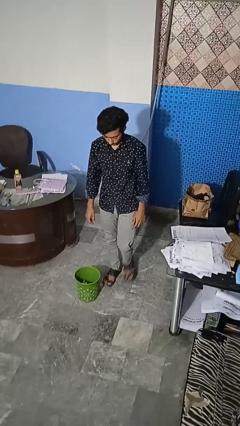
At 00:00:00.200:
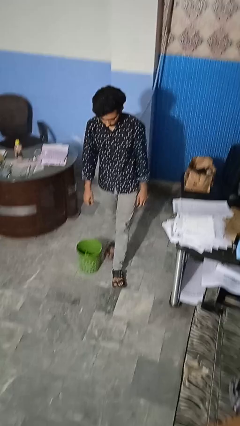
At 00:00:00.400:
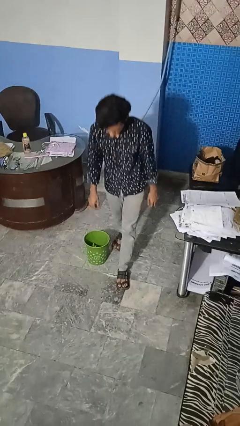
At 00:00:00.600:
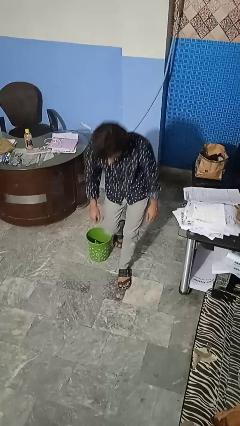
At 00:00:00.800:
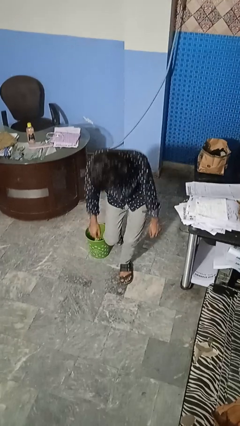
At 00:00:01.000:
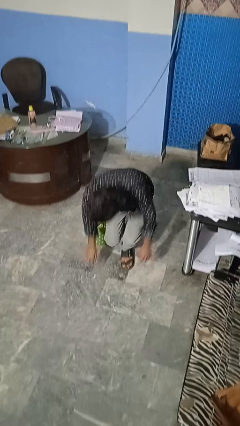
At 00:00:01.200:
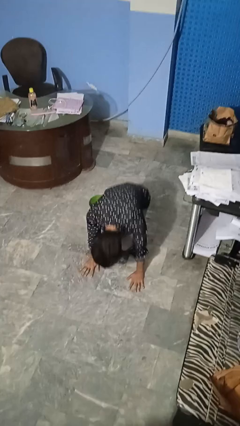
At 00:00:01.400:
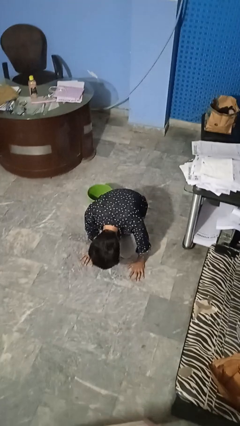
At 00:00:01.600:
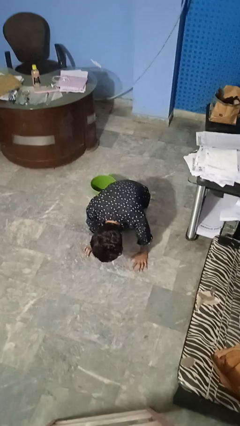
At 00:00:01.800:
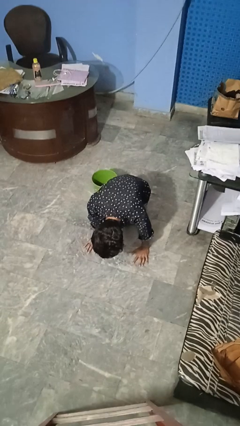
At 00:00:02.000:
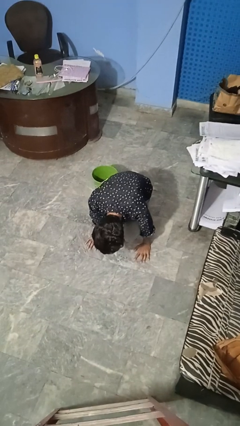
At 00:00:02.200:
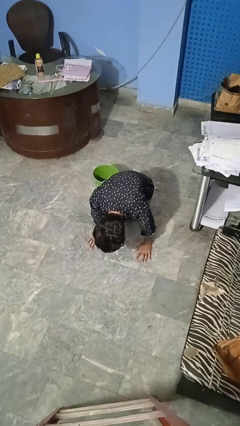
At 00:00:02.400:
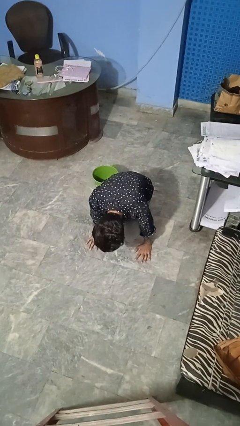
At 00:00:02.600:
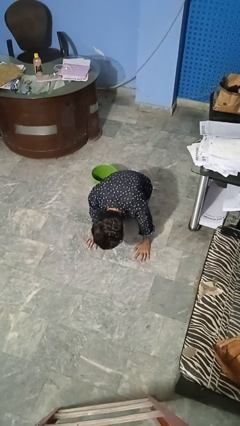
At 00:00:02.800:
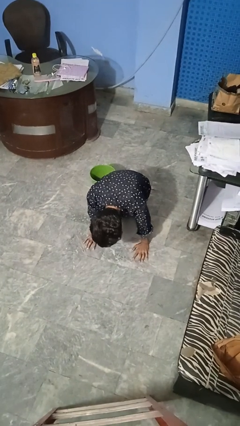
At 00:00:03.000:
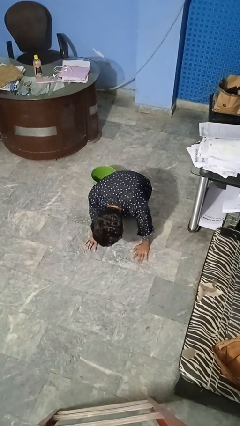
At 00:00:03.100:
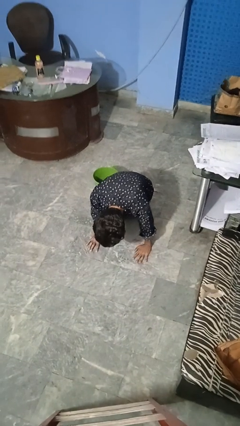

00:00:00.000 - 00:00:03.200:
person trips on object on floor

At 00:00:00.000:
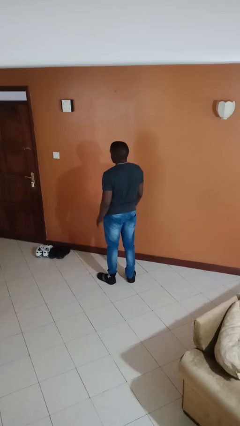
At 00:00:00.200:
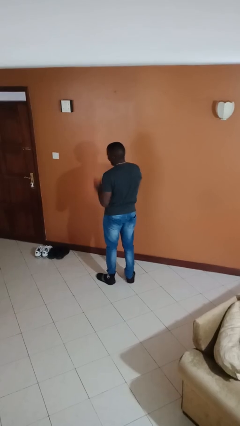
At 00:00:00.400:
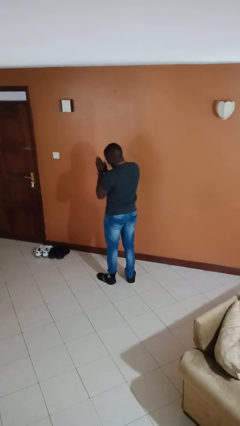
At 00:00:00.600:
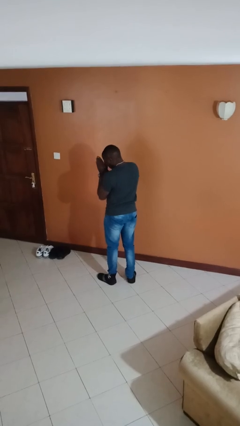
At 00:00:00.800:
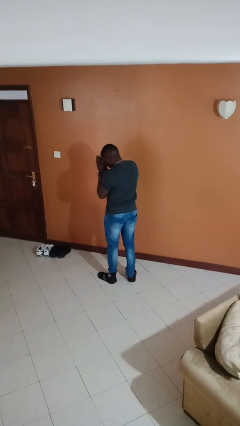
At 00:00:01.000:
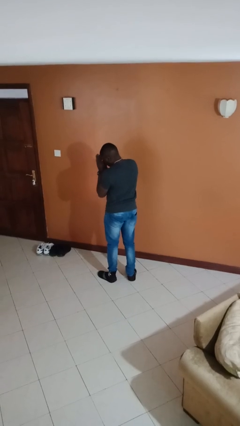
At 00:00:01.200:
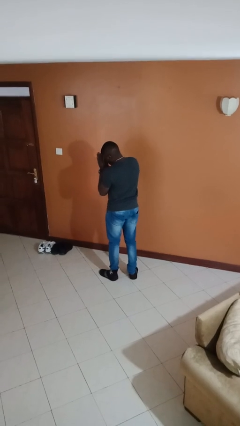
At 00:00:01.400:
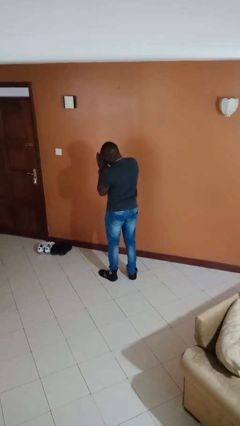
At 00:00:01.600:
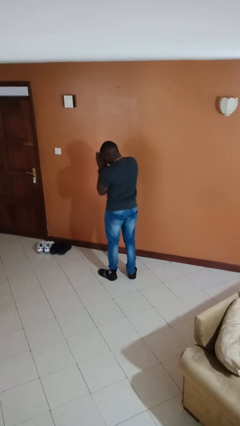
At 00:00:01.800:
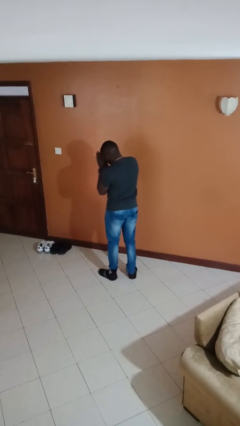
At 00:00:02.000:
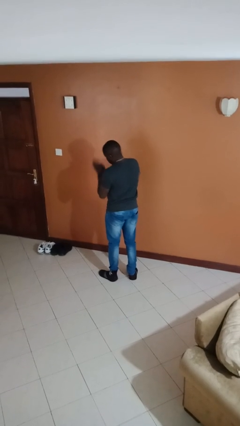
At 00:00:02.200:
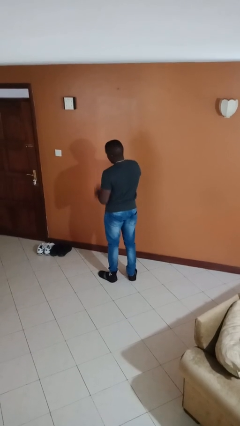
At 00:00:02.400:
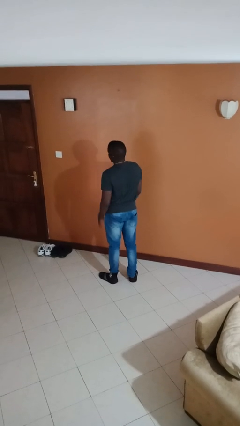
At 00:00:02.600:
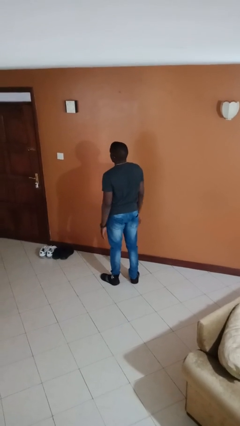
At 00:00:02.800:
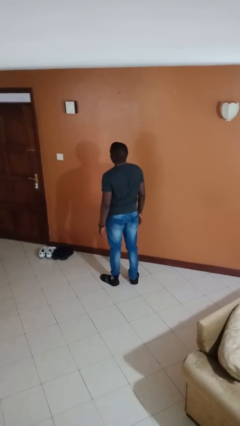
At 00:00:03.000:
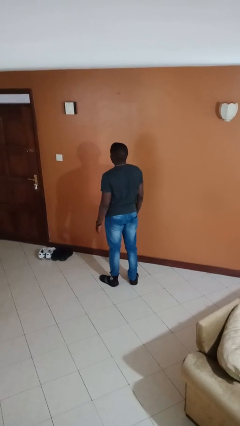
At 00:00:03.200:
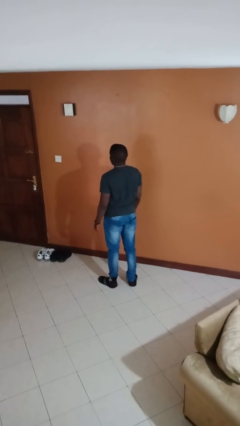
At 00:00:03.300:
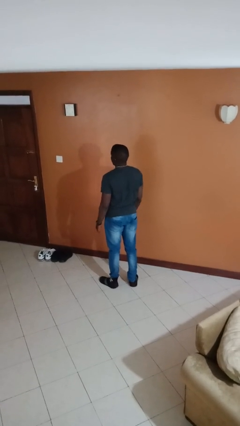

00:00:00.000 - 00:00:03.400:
person prays

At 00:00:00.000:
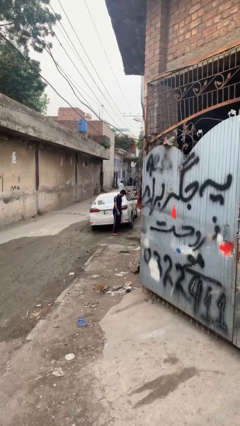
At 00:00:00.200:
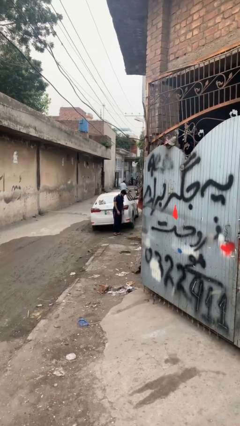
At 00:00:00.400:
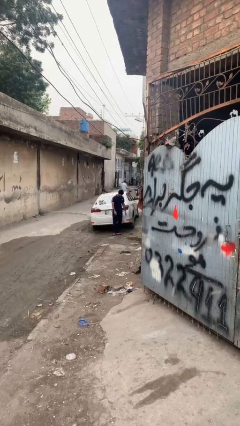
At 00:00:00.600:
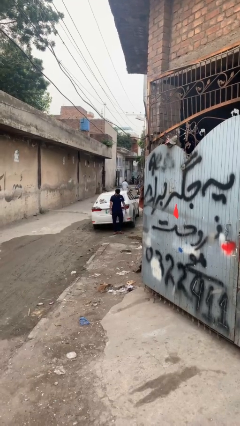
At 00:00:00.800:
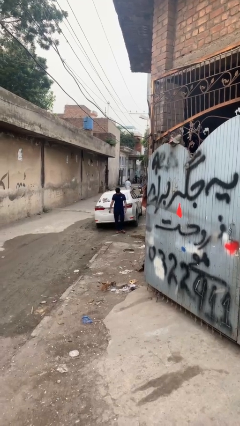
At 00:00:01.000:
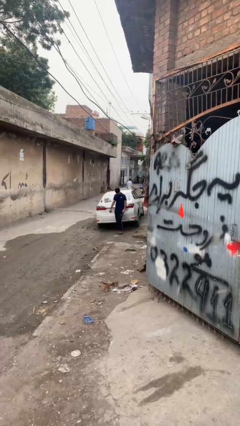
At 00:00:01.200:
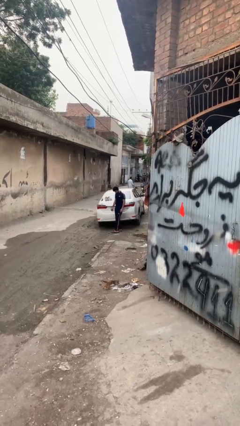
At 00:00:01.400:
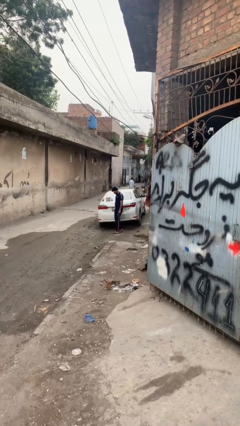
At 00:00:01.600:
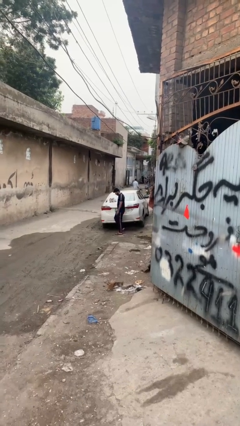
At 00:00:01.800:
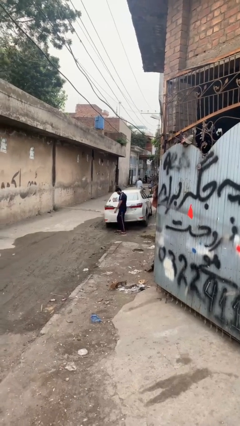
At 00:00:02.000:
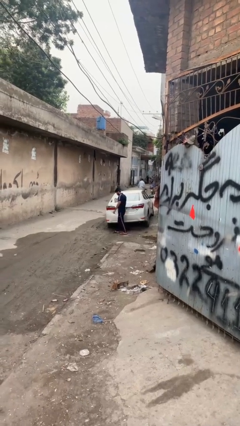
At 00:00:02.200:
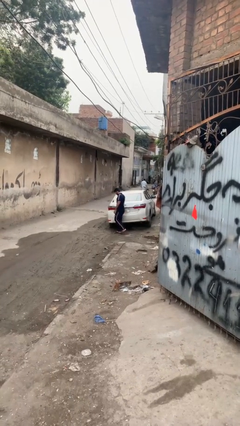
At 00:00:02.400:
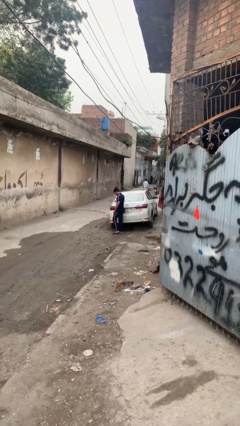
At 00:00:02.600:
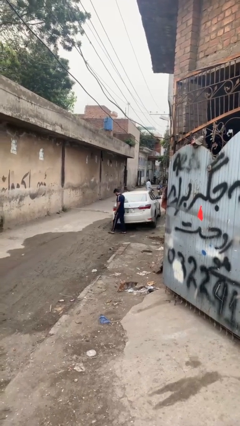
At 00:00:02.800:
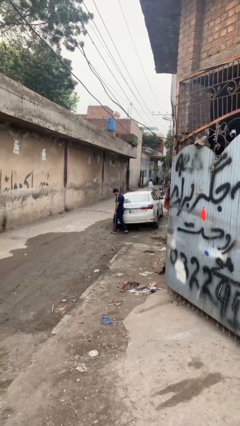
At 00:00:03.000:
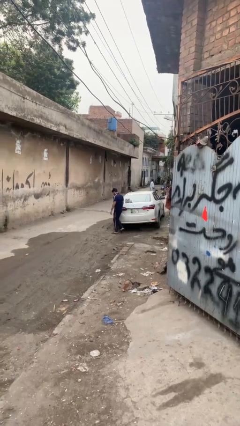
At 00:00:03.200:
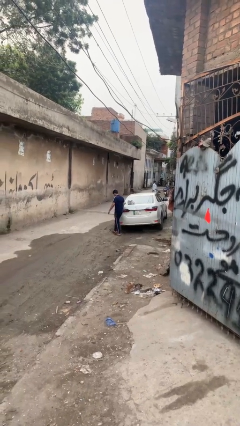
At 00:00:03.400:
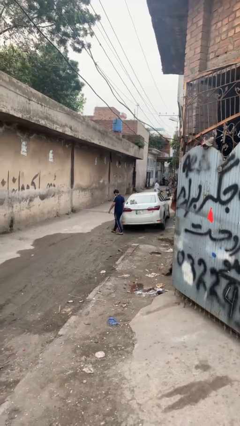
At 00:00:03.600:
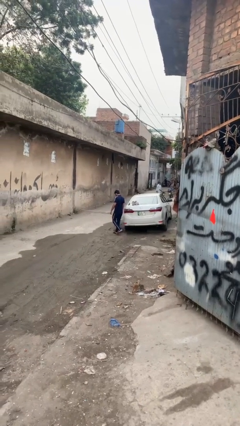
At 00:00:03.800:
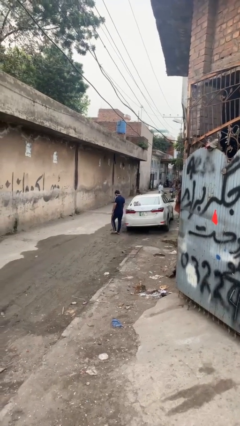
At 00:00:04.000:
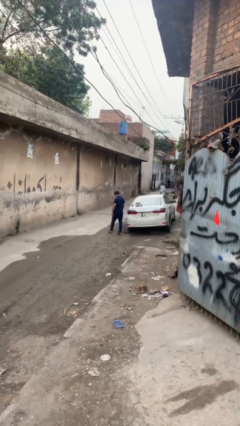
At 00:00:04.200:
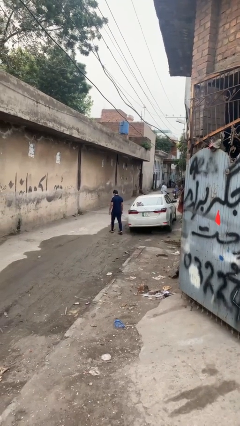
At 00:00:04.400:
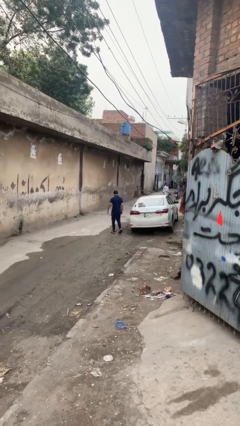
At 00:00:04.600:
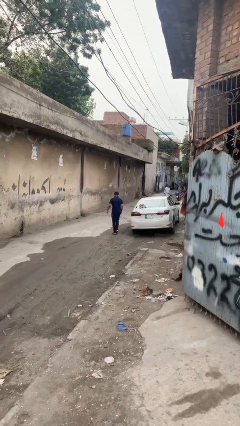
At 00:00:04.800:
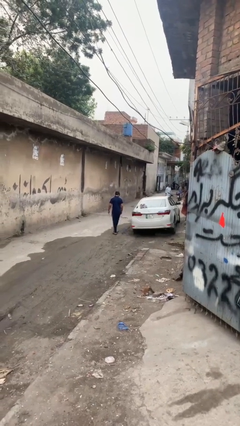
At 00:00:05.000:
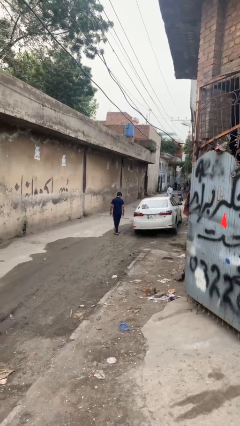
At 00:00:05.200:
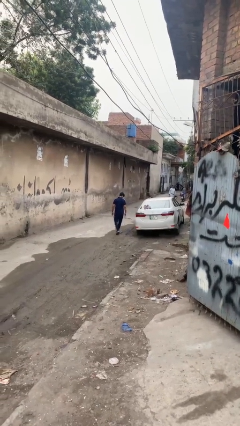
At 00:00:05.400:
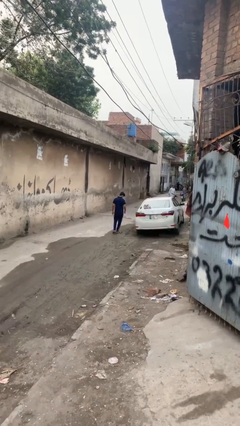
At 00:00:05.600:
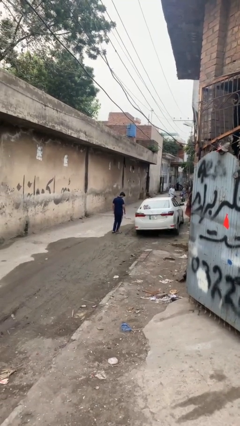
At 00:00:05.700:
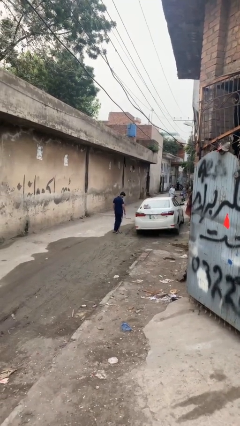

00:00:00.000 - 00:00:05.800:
person walks around car

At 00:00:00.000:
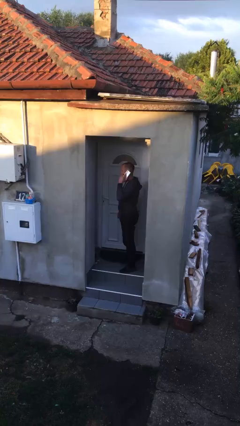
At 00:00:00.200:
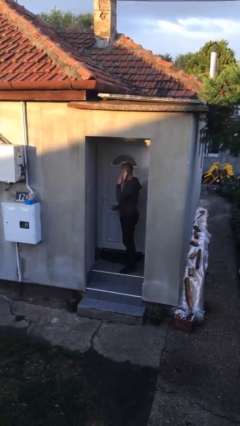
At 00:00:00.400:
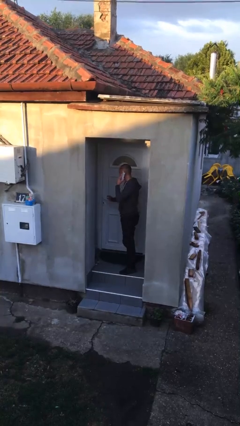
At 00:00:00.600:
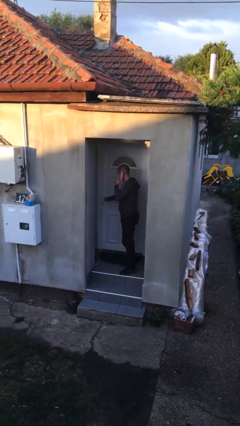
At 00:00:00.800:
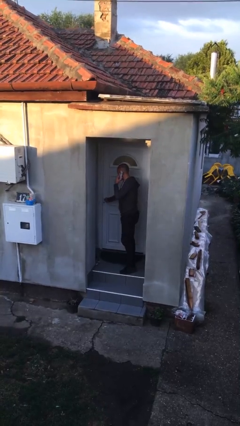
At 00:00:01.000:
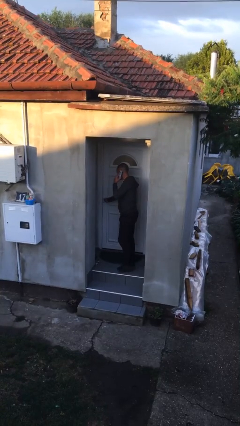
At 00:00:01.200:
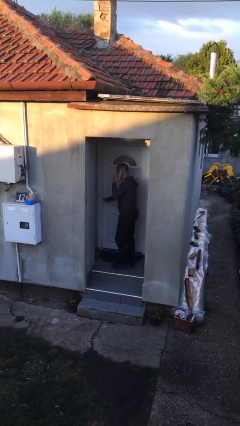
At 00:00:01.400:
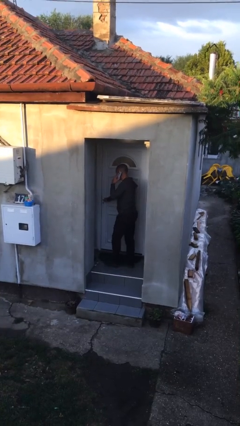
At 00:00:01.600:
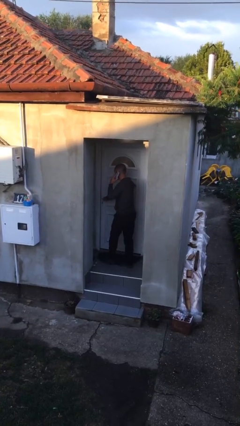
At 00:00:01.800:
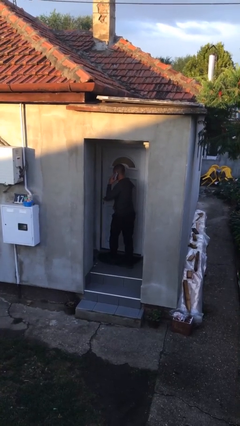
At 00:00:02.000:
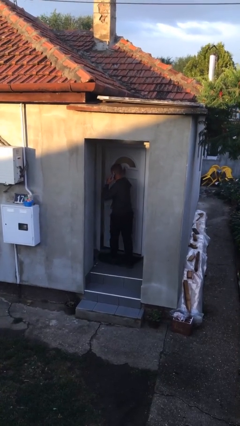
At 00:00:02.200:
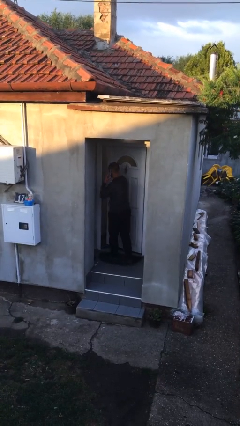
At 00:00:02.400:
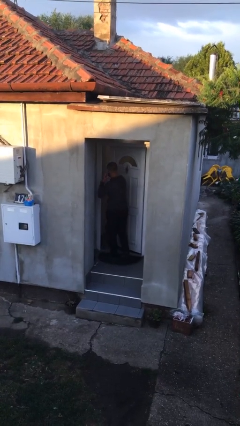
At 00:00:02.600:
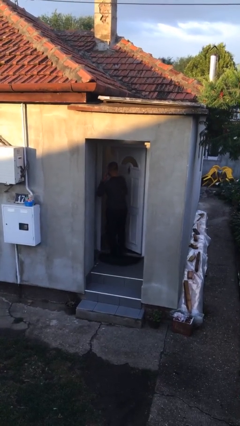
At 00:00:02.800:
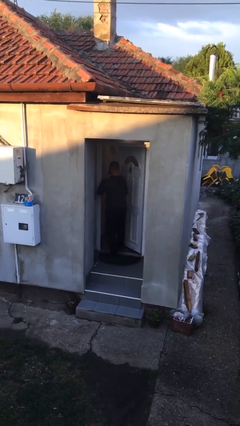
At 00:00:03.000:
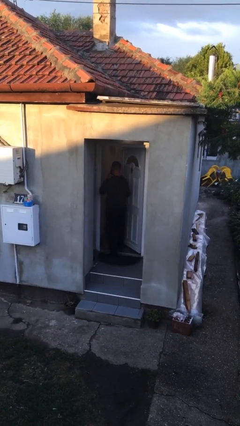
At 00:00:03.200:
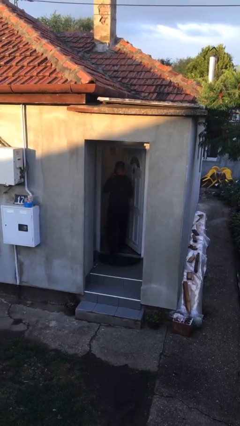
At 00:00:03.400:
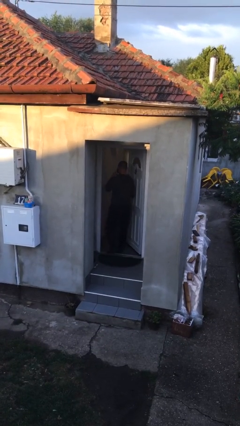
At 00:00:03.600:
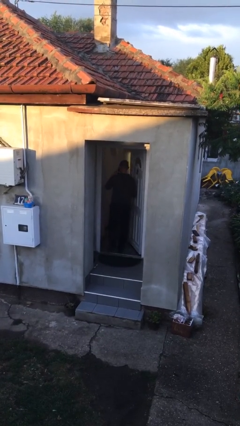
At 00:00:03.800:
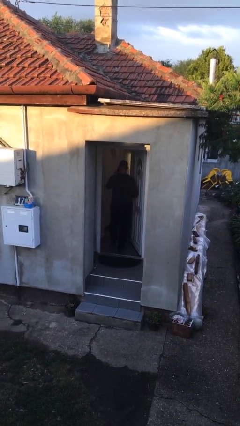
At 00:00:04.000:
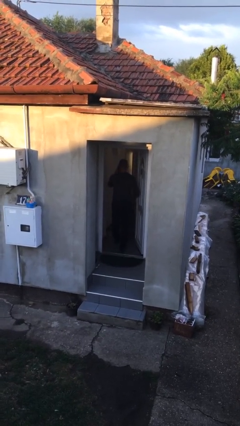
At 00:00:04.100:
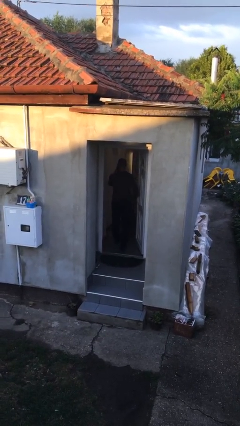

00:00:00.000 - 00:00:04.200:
person opens facility door

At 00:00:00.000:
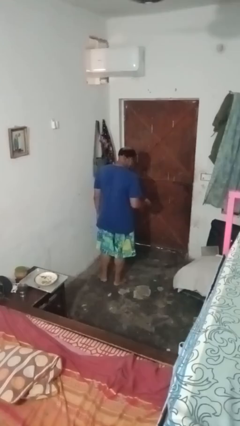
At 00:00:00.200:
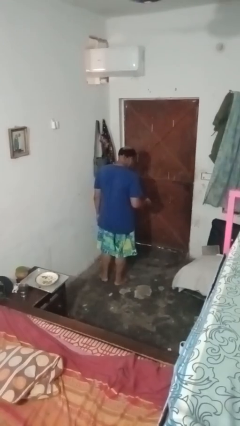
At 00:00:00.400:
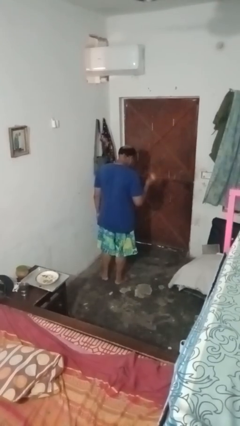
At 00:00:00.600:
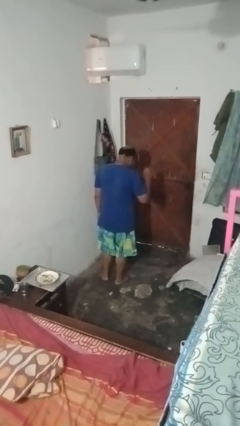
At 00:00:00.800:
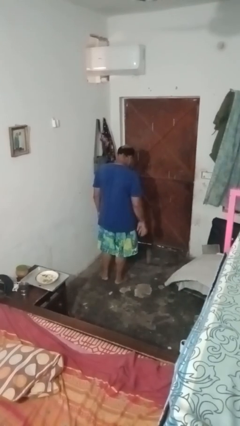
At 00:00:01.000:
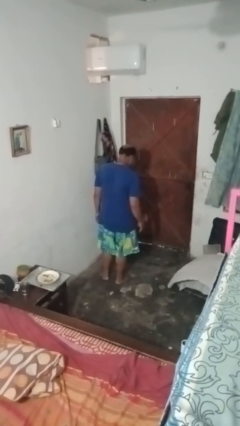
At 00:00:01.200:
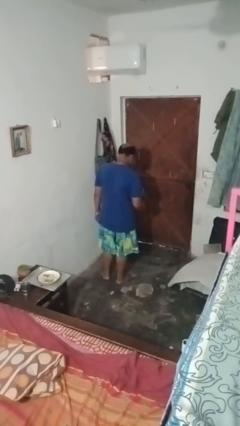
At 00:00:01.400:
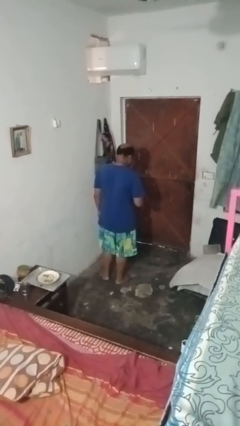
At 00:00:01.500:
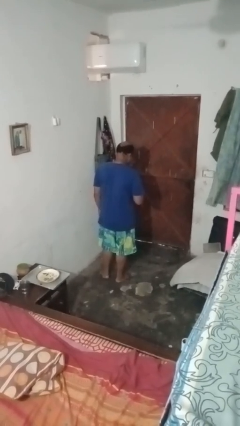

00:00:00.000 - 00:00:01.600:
person bounces ball on floor
